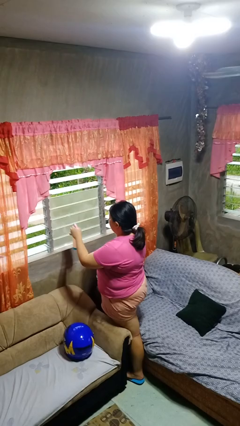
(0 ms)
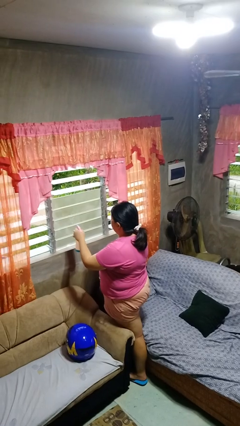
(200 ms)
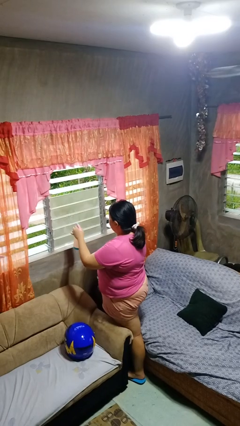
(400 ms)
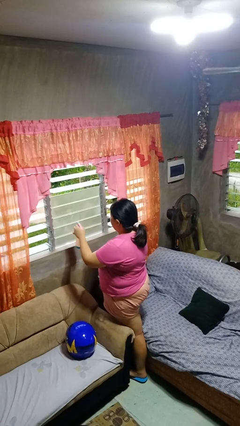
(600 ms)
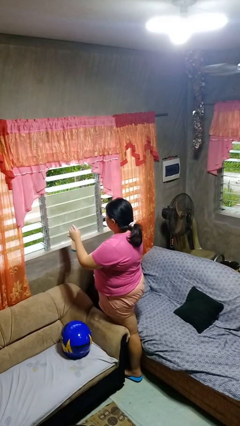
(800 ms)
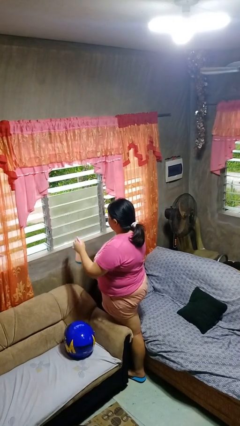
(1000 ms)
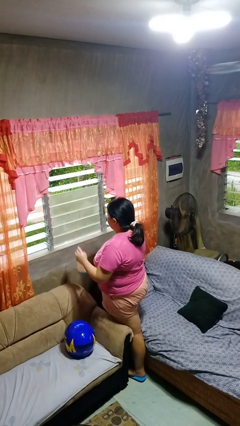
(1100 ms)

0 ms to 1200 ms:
person sprays from bottle

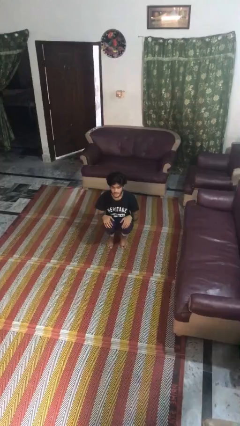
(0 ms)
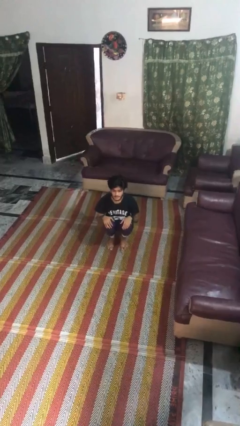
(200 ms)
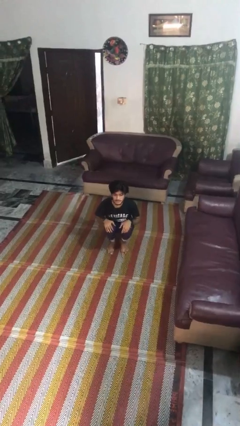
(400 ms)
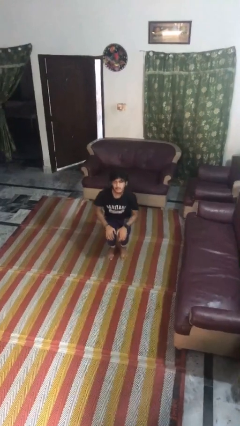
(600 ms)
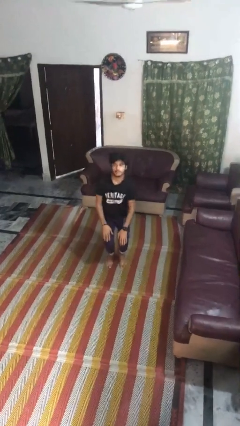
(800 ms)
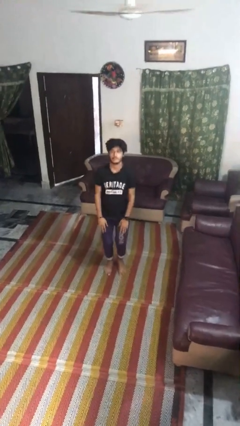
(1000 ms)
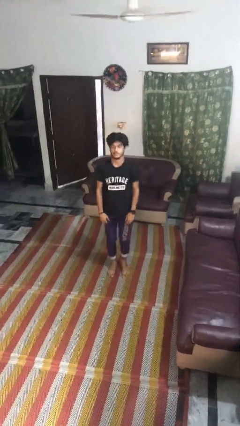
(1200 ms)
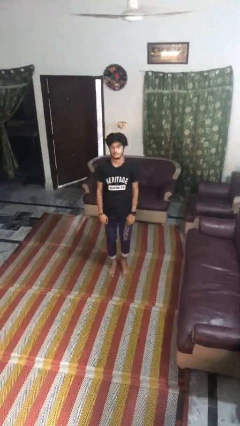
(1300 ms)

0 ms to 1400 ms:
person stands up

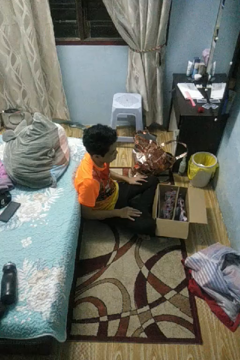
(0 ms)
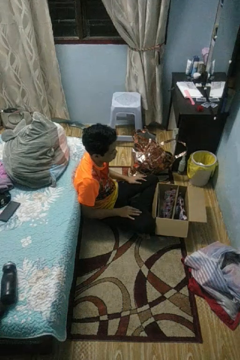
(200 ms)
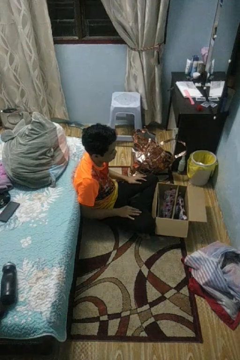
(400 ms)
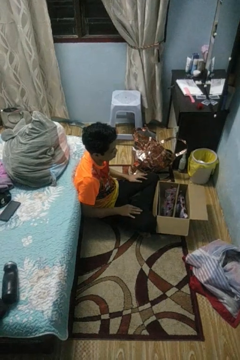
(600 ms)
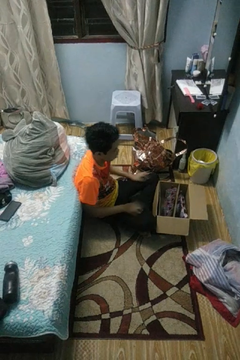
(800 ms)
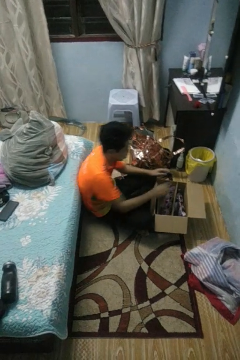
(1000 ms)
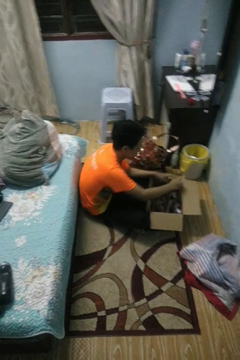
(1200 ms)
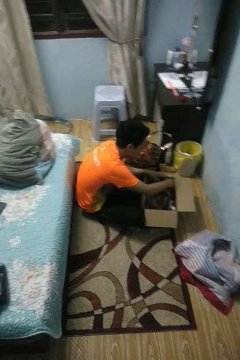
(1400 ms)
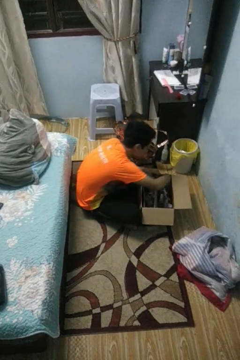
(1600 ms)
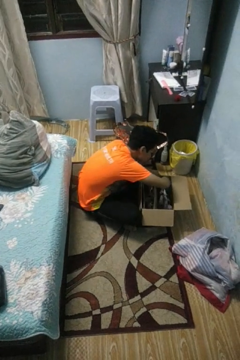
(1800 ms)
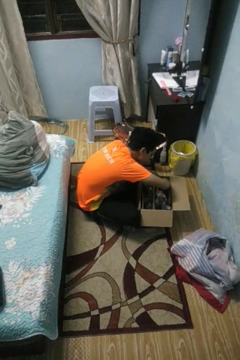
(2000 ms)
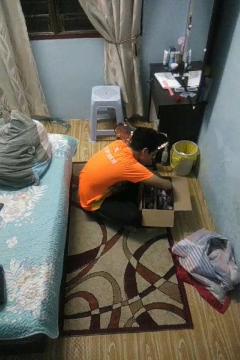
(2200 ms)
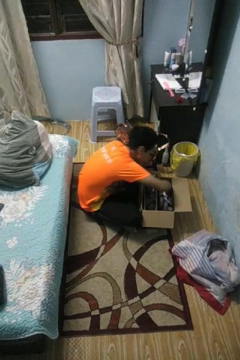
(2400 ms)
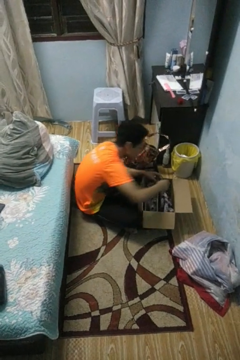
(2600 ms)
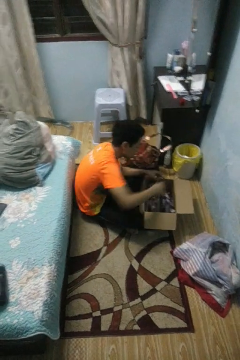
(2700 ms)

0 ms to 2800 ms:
person searches in box

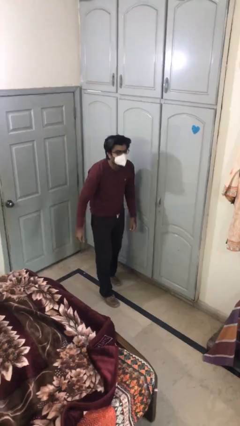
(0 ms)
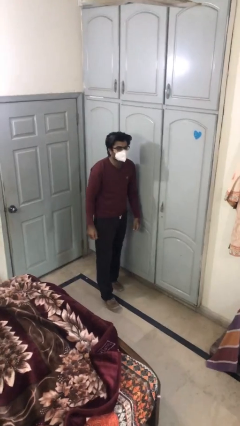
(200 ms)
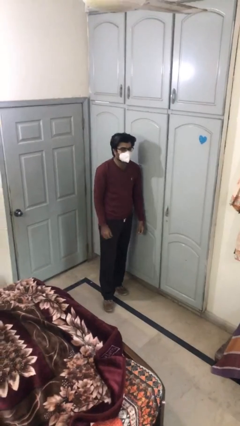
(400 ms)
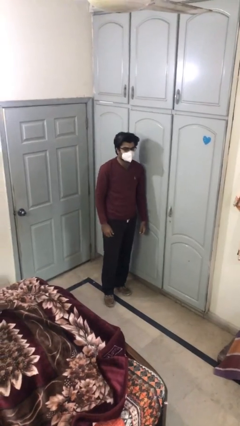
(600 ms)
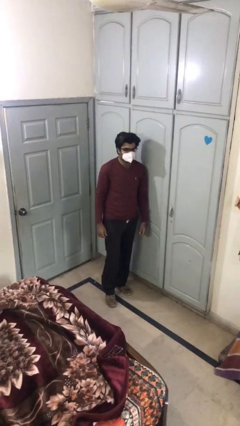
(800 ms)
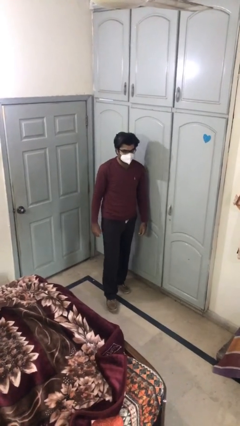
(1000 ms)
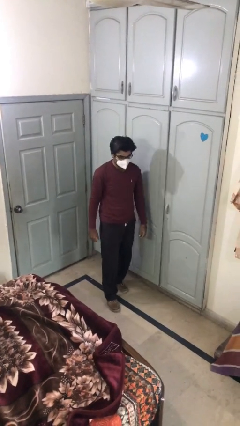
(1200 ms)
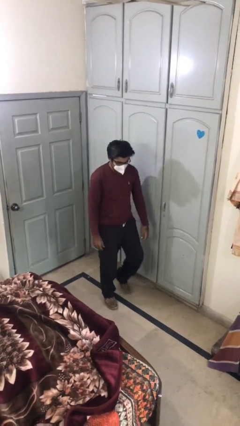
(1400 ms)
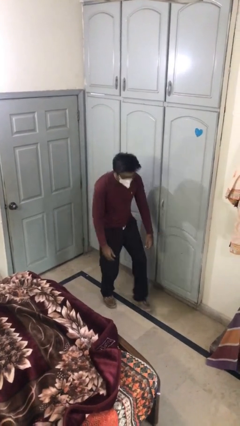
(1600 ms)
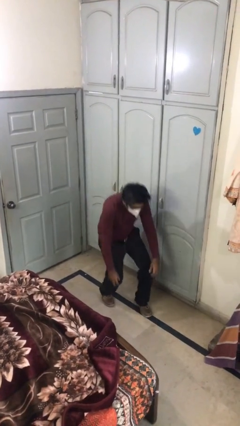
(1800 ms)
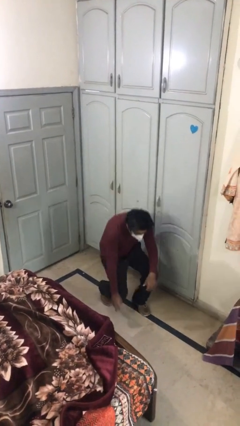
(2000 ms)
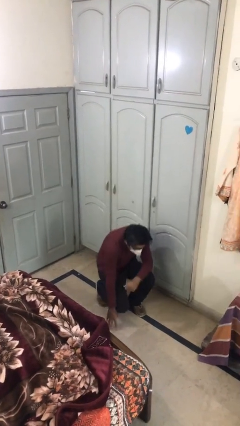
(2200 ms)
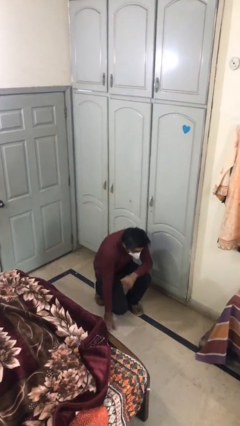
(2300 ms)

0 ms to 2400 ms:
person sits down

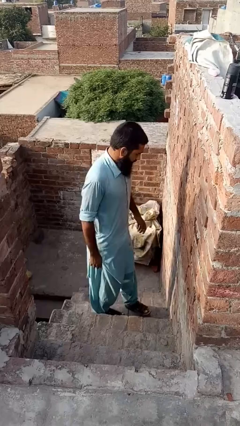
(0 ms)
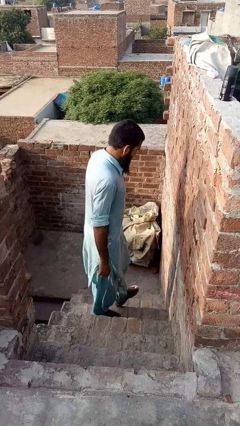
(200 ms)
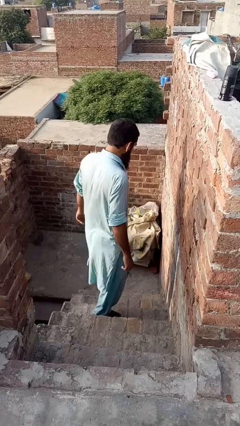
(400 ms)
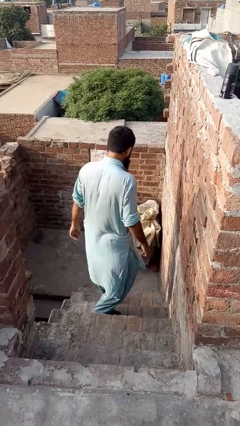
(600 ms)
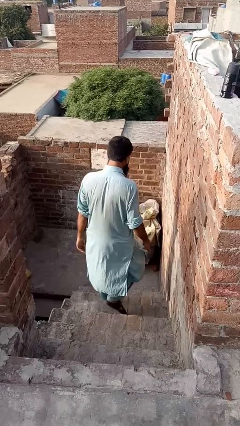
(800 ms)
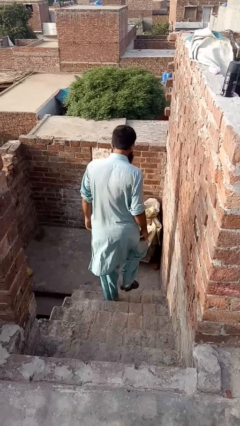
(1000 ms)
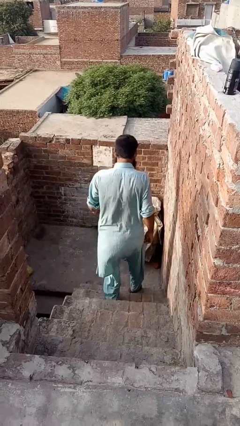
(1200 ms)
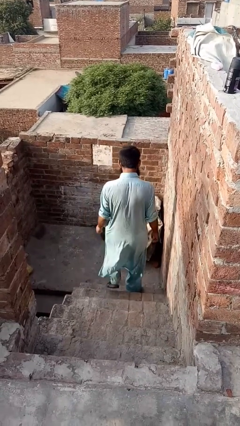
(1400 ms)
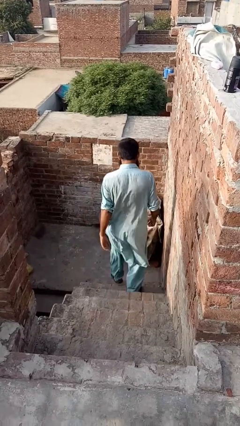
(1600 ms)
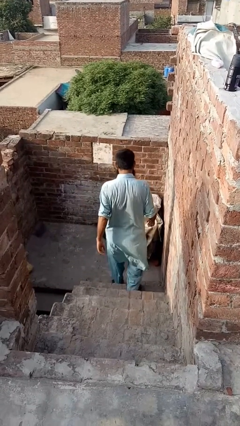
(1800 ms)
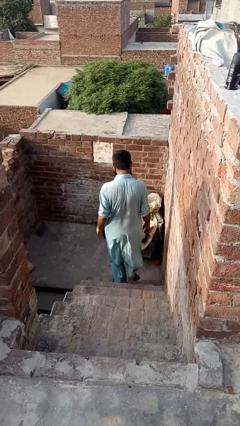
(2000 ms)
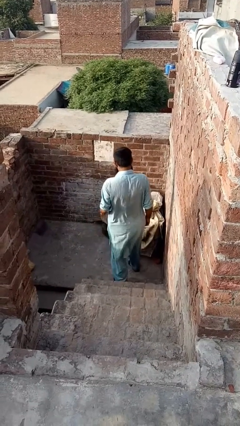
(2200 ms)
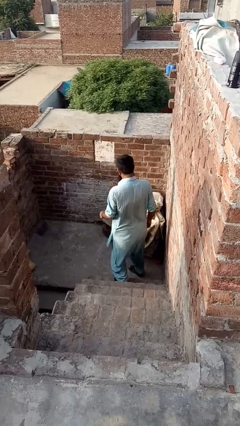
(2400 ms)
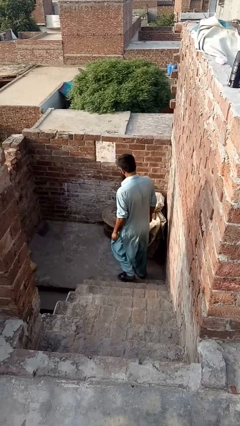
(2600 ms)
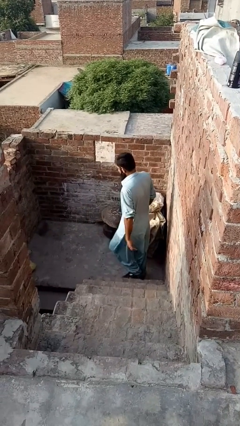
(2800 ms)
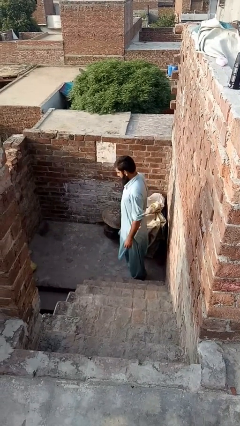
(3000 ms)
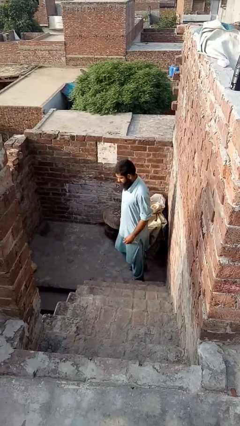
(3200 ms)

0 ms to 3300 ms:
person climbs down stairs

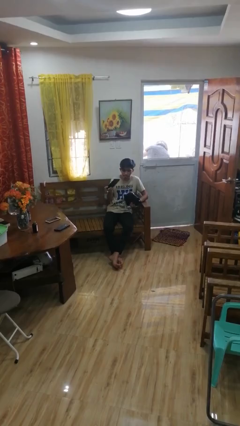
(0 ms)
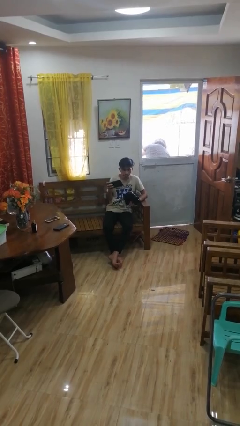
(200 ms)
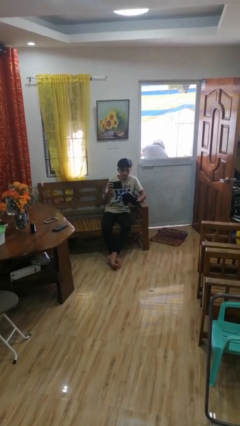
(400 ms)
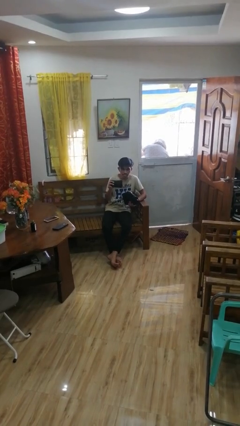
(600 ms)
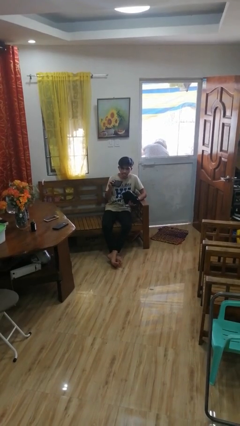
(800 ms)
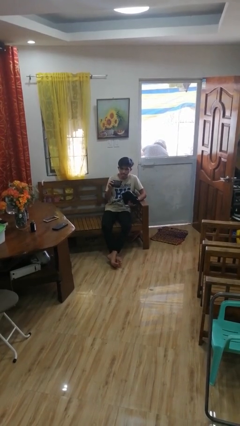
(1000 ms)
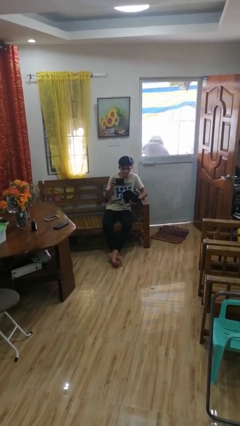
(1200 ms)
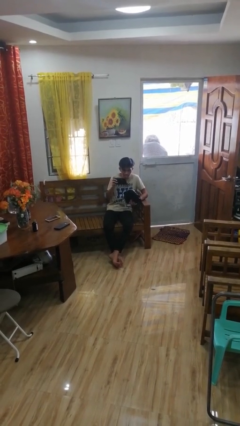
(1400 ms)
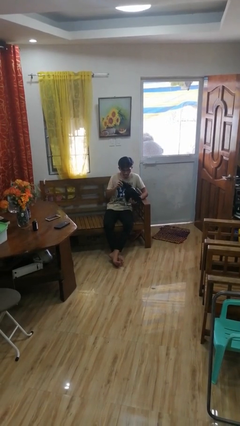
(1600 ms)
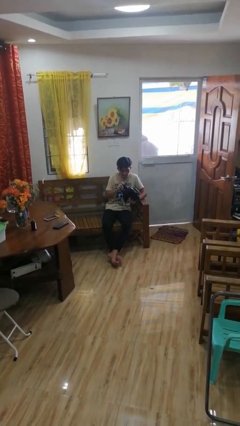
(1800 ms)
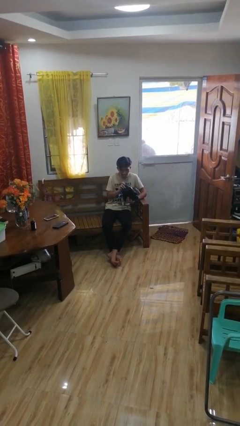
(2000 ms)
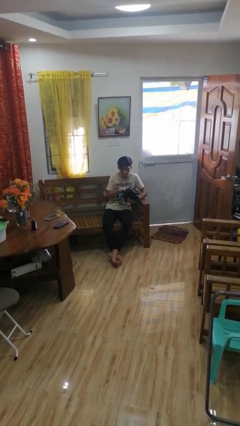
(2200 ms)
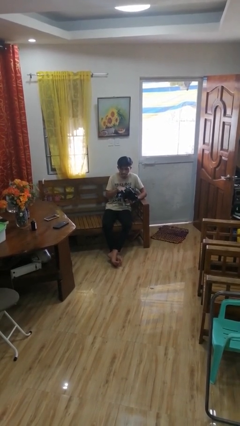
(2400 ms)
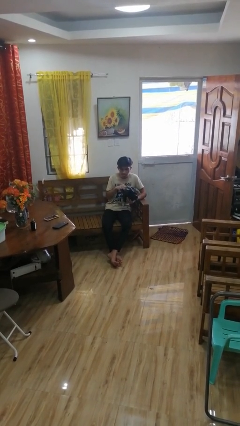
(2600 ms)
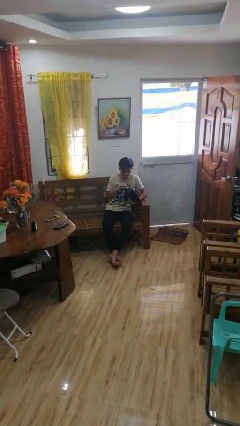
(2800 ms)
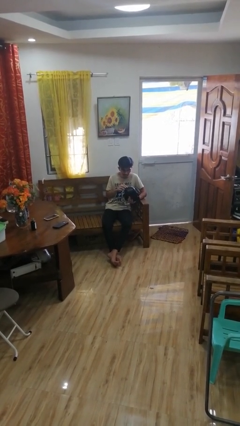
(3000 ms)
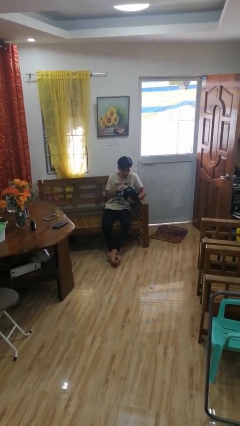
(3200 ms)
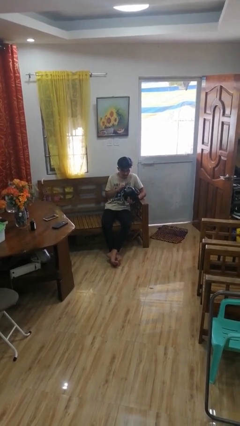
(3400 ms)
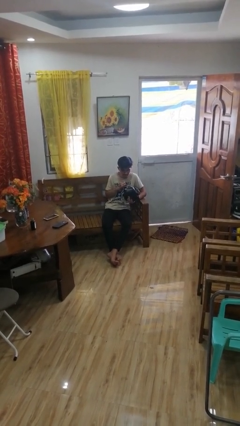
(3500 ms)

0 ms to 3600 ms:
person puts object into purse

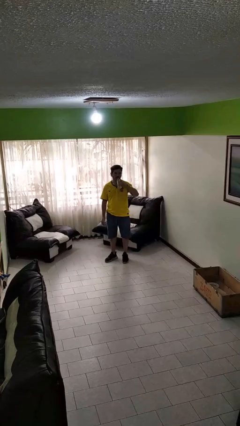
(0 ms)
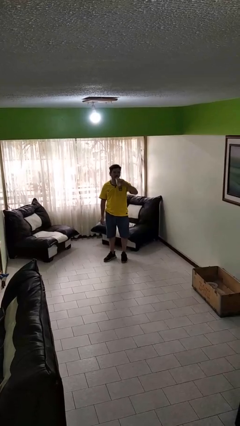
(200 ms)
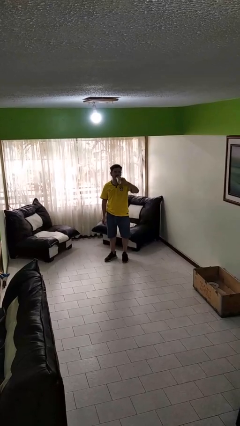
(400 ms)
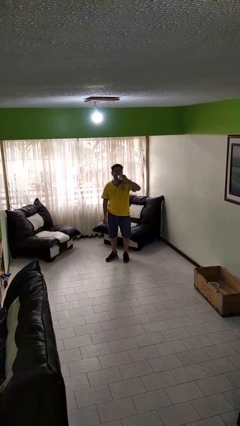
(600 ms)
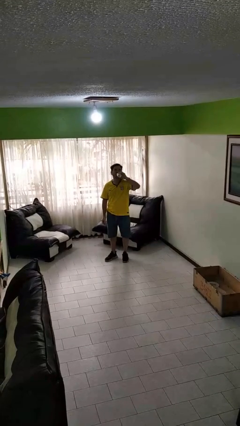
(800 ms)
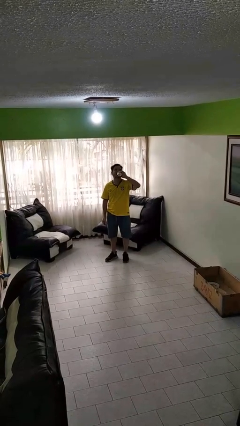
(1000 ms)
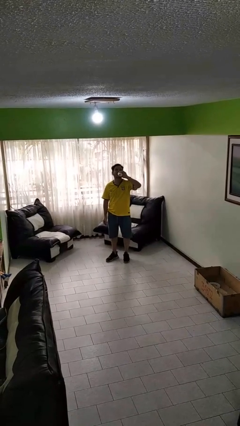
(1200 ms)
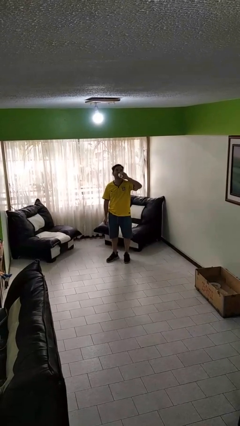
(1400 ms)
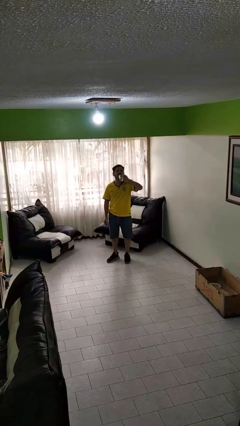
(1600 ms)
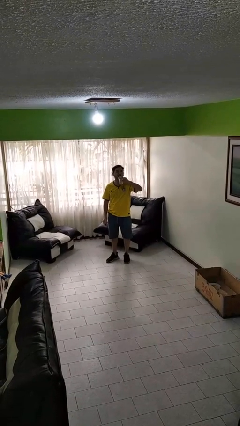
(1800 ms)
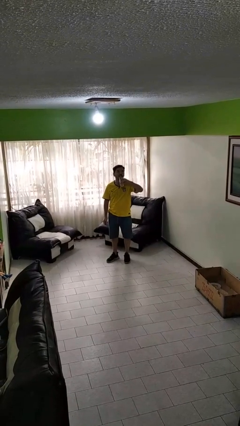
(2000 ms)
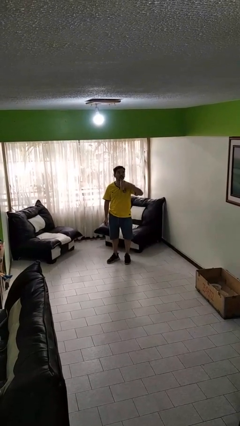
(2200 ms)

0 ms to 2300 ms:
person drinks from bottle

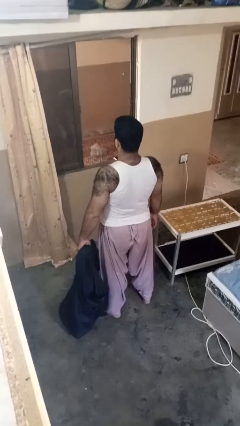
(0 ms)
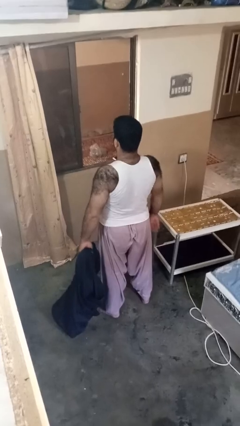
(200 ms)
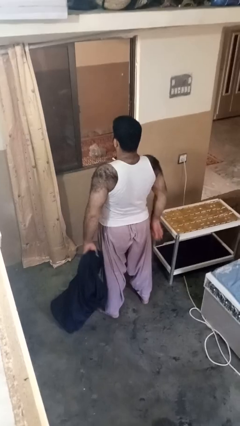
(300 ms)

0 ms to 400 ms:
person ties jacket around waist

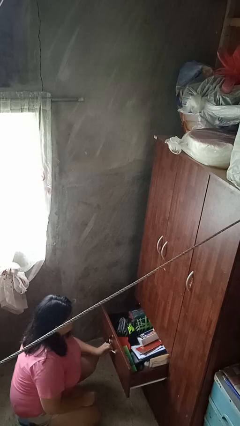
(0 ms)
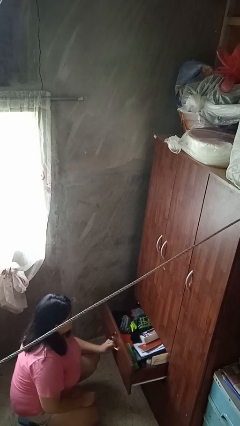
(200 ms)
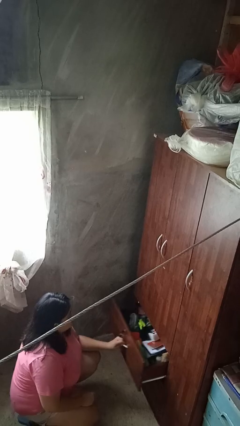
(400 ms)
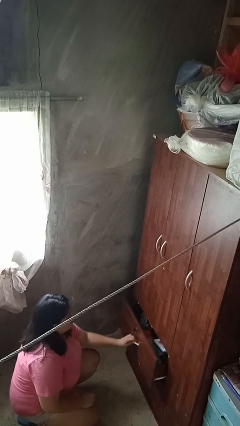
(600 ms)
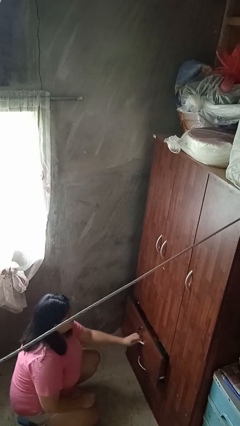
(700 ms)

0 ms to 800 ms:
person closes dresser drawer
